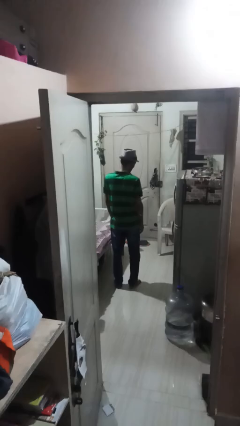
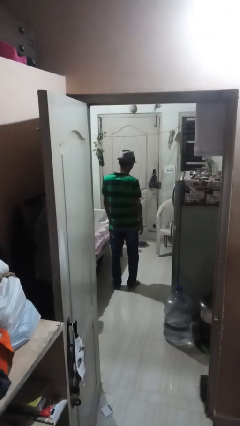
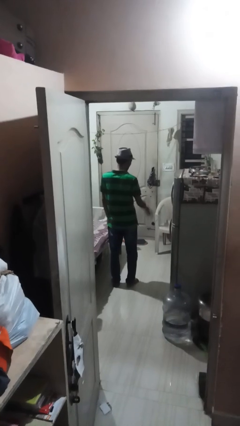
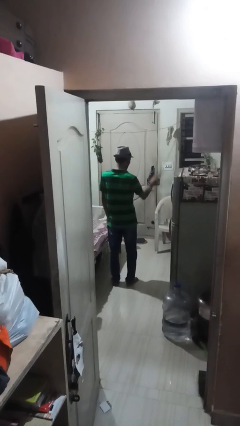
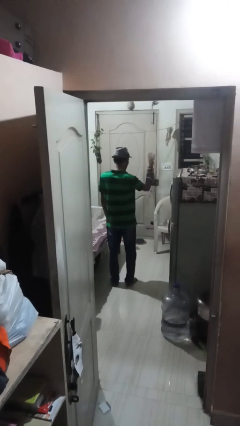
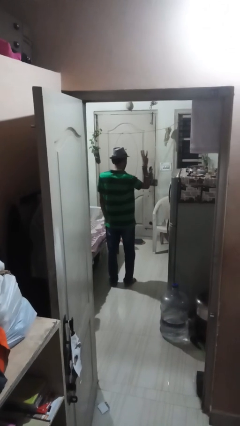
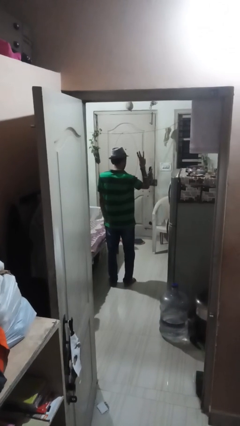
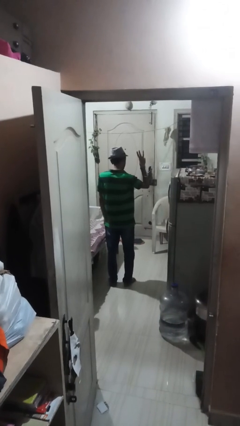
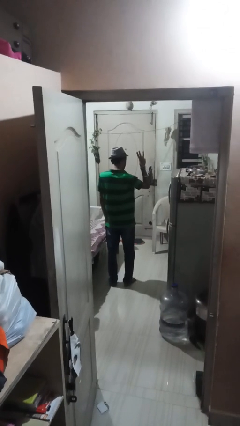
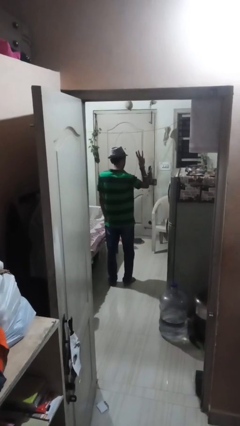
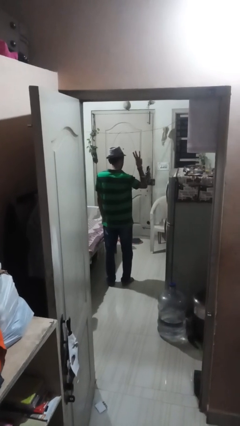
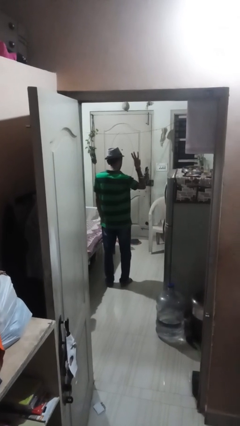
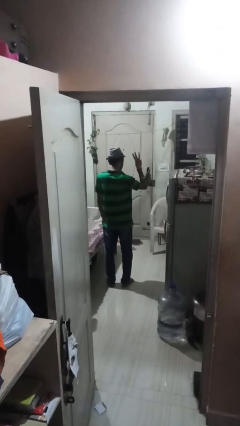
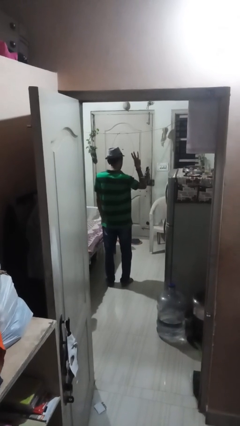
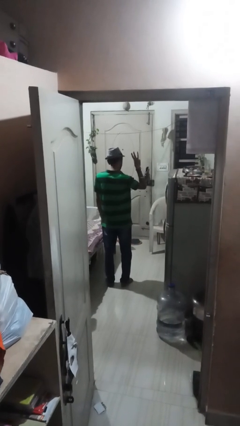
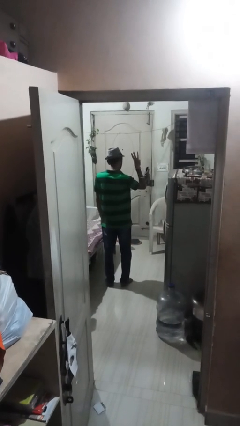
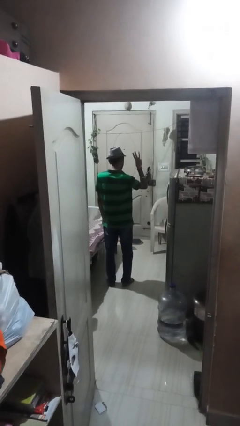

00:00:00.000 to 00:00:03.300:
person gestures number three

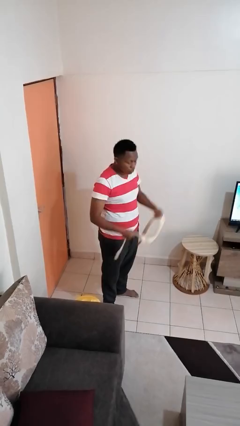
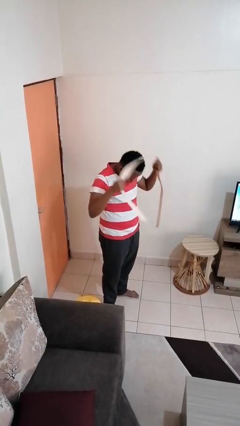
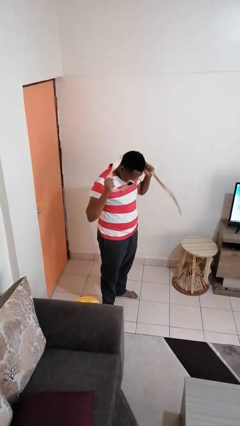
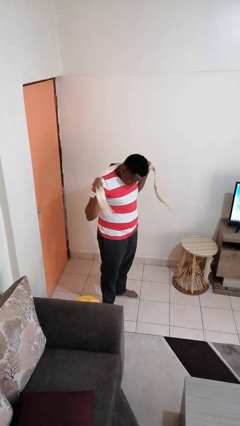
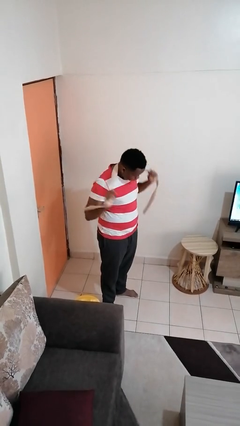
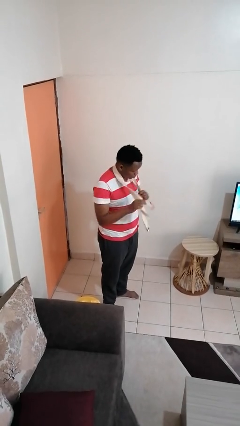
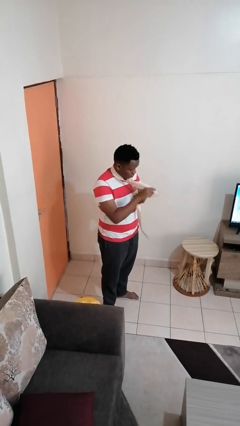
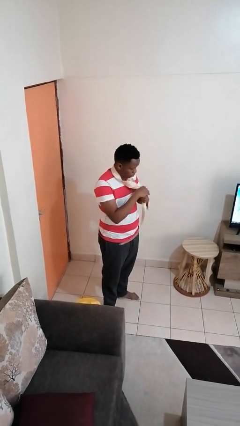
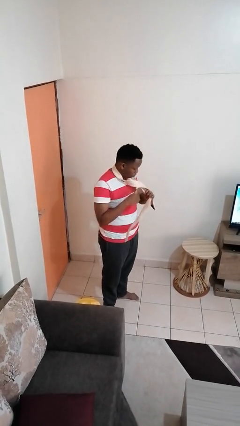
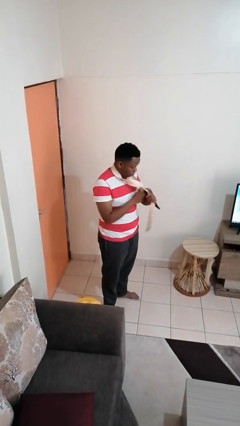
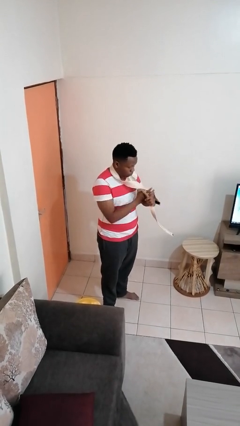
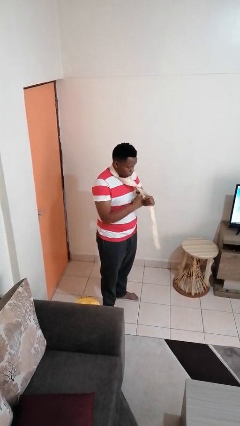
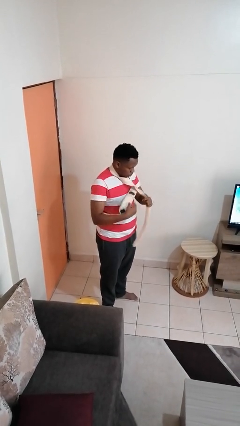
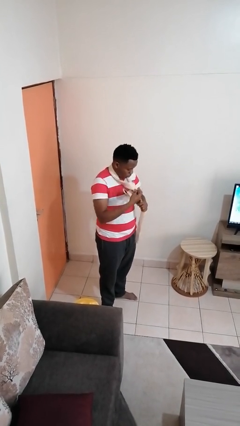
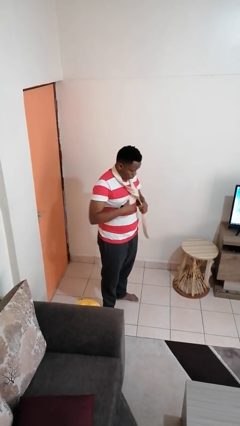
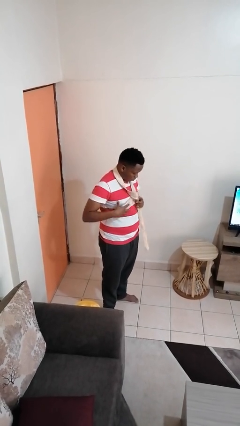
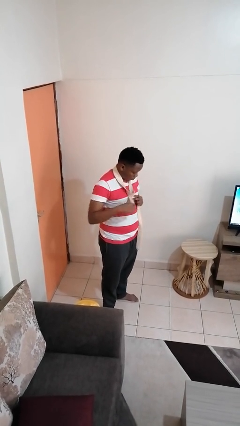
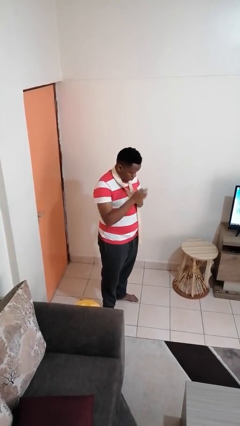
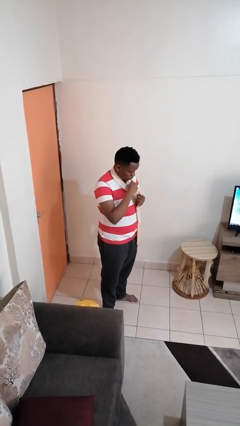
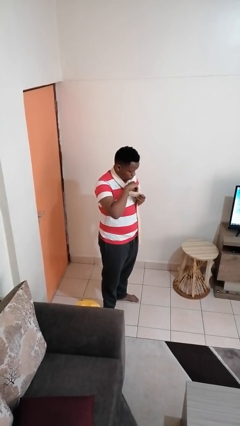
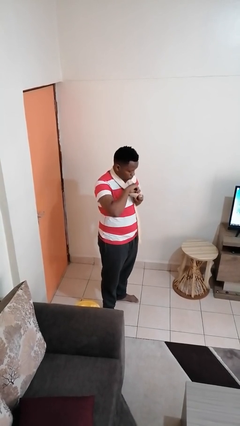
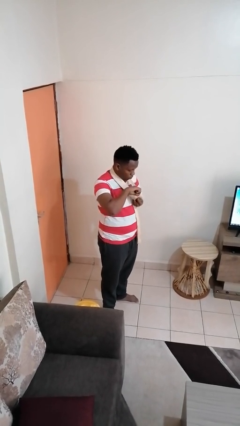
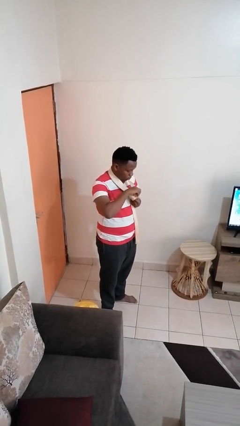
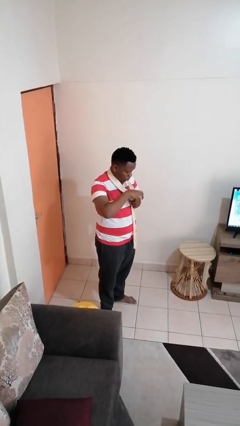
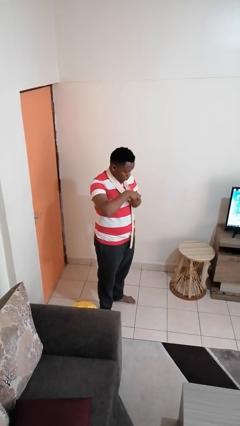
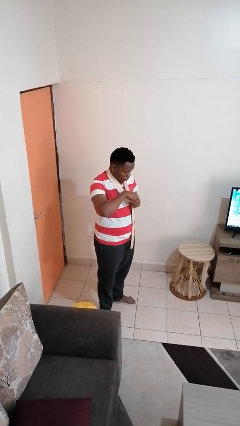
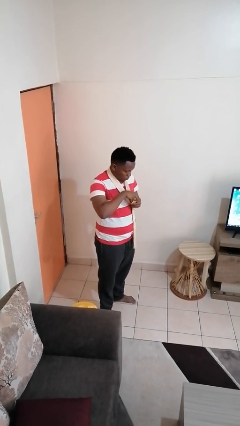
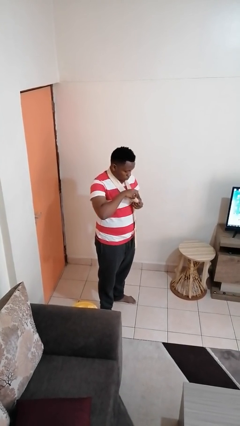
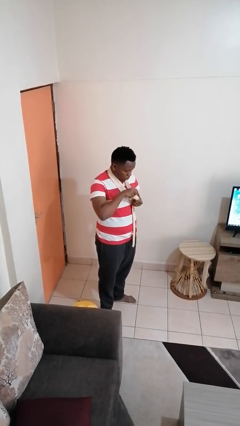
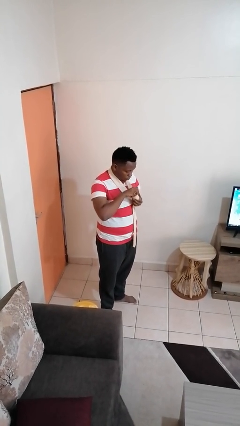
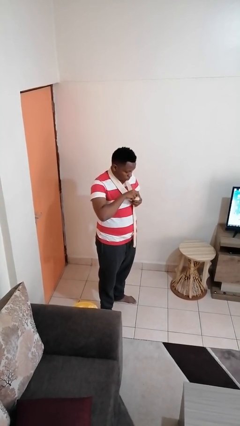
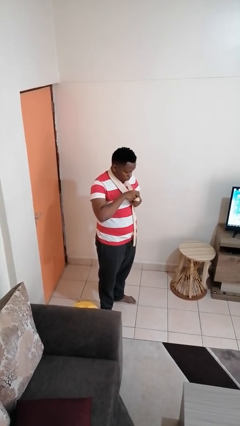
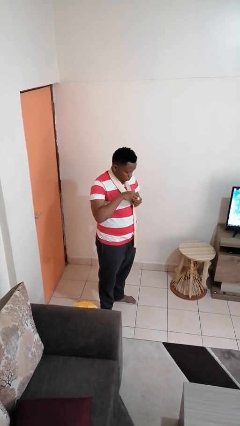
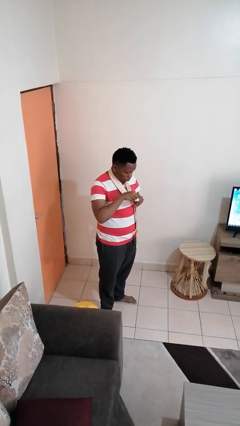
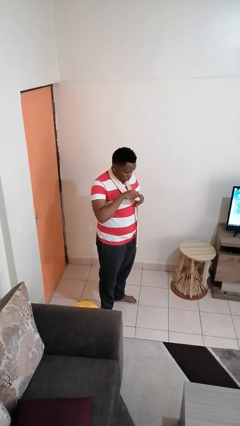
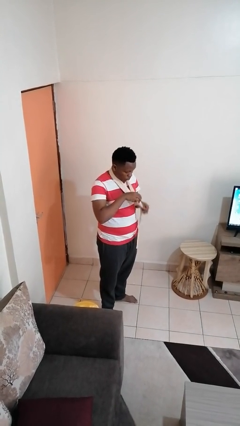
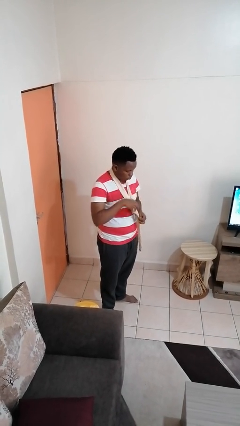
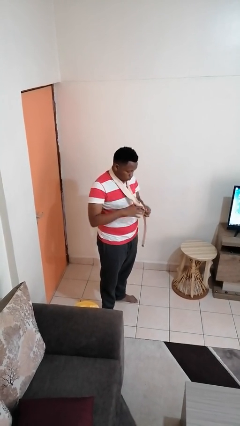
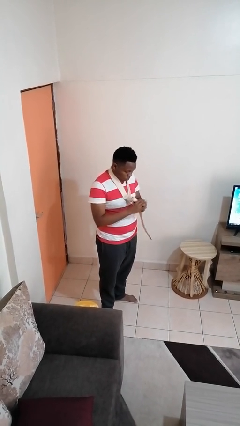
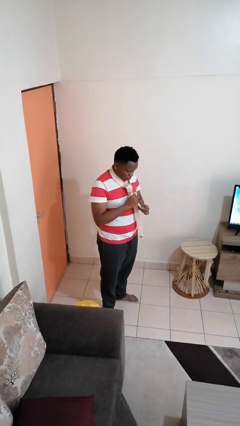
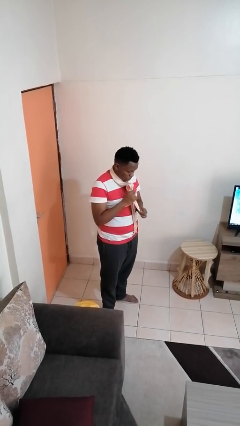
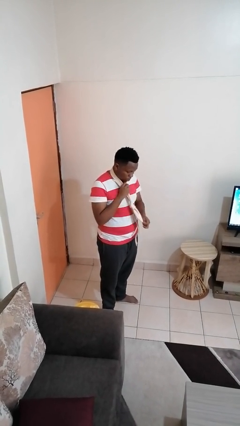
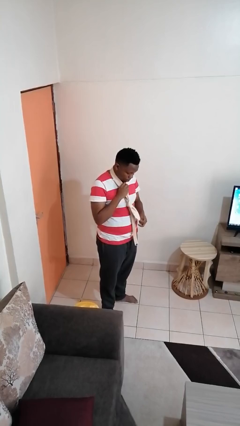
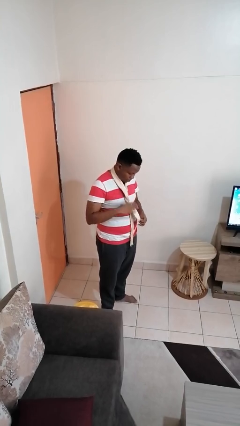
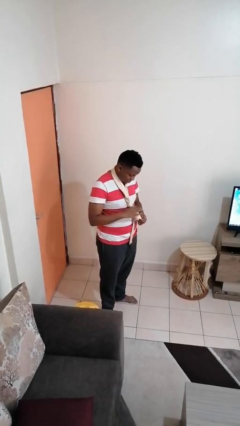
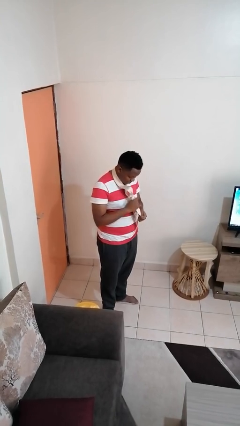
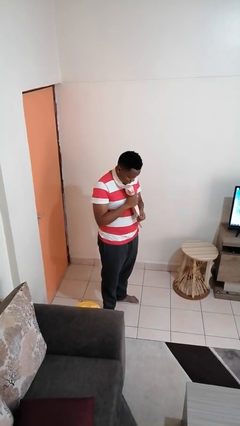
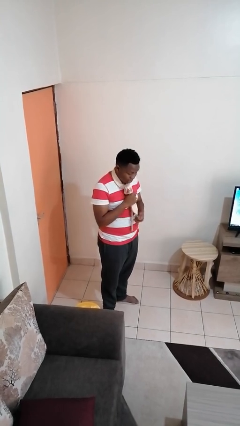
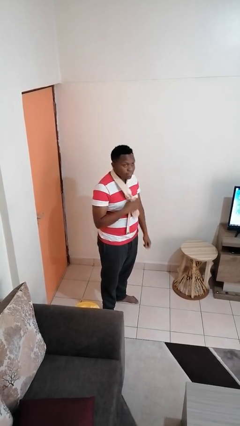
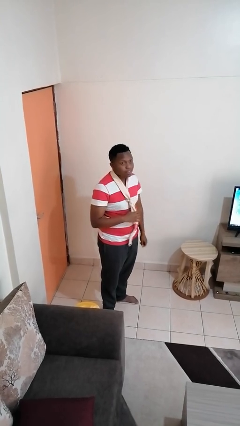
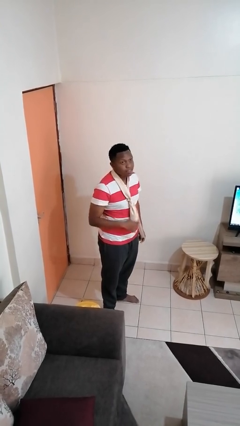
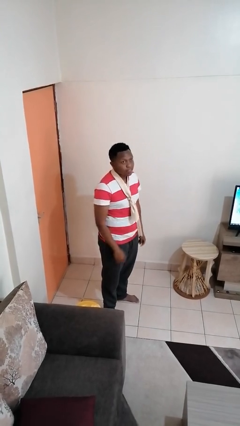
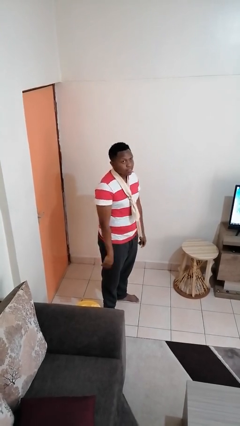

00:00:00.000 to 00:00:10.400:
person puts on necktie

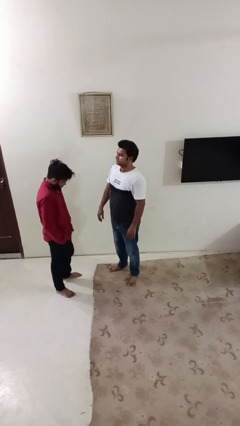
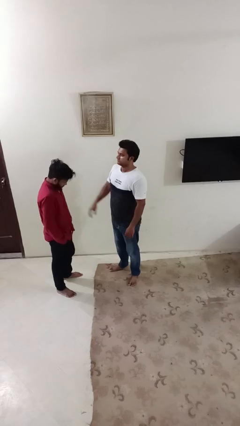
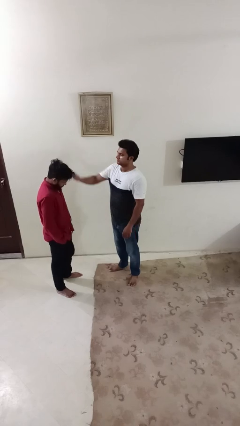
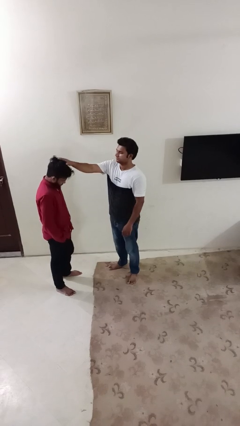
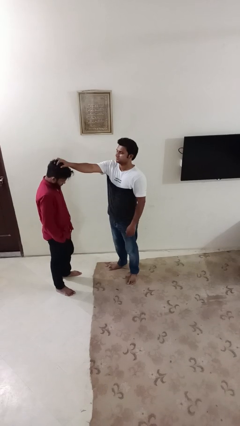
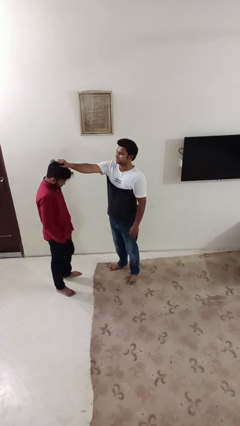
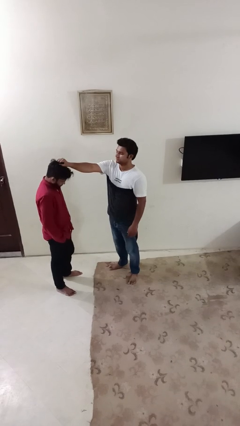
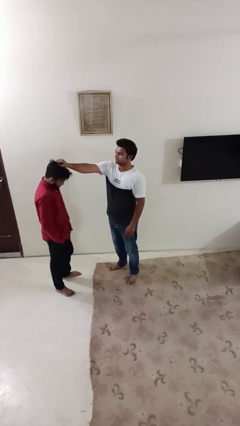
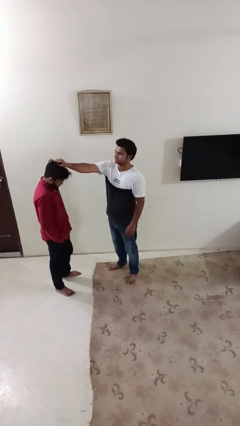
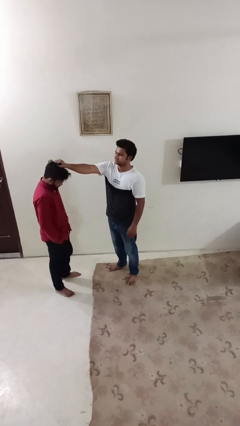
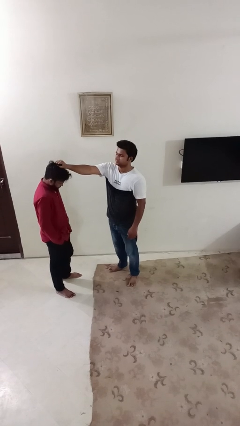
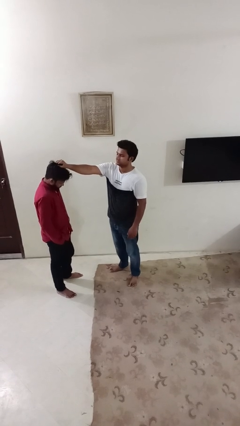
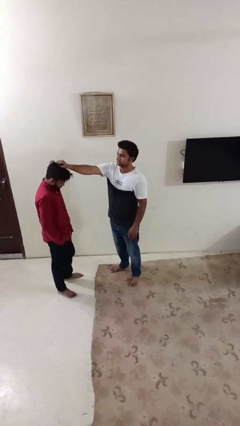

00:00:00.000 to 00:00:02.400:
person grabs person by hair

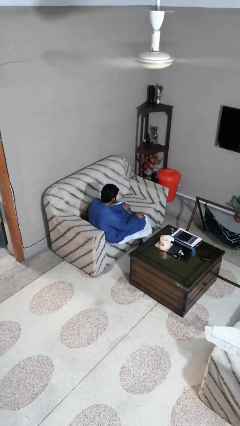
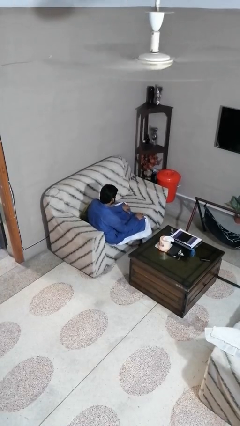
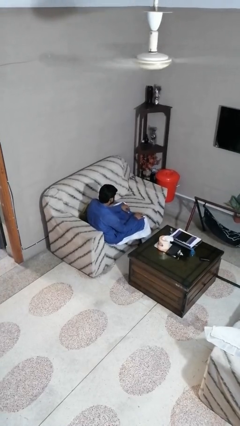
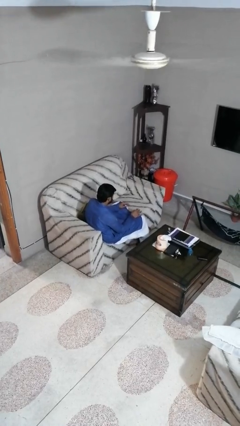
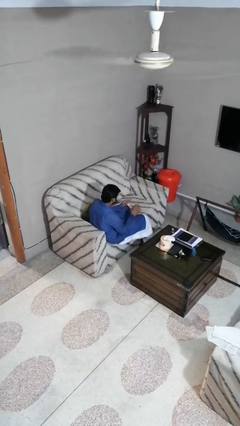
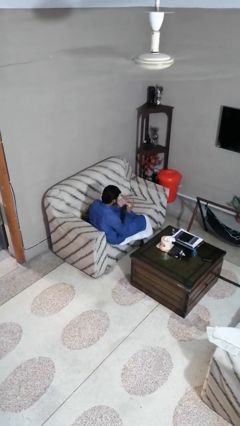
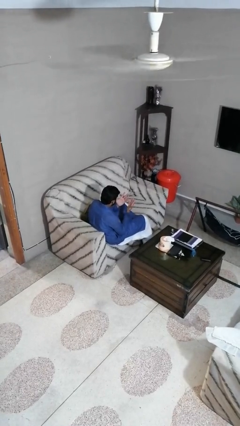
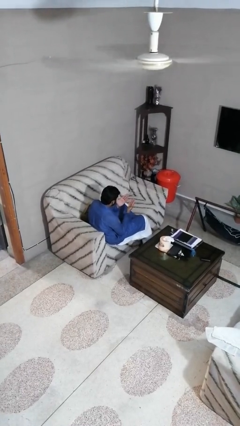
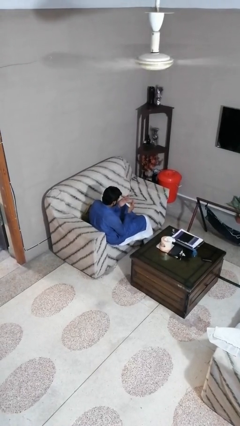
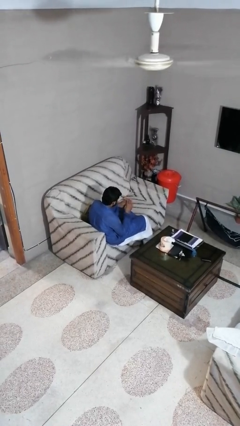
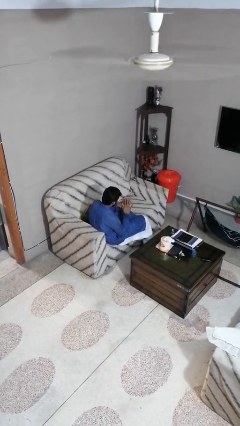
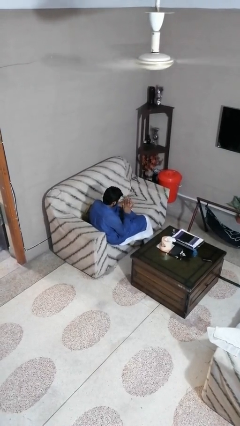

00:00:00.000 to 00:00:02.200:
person looks at hands in lap
